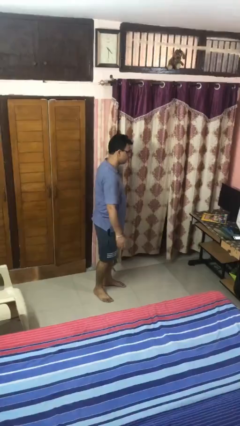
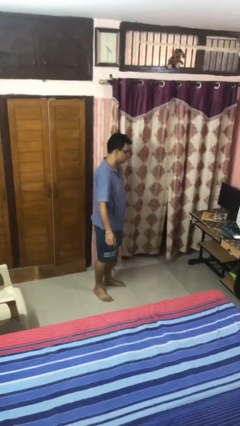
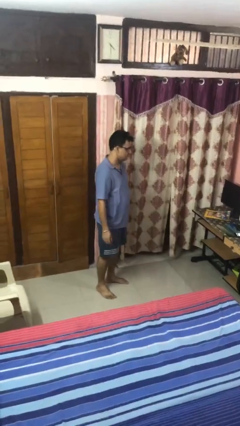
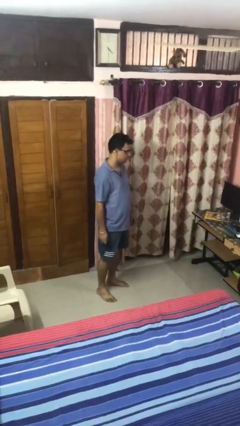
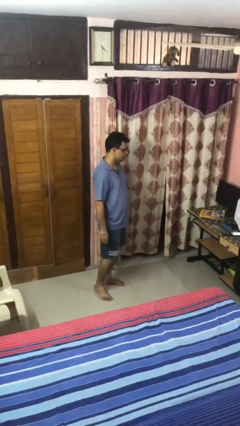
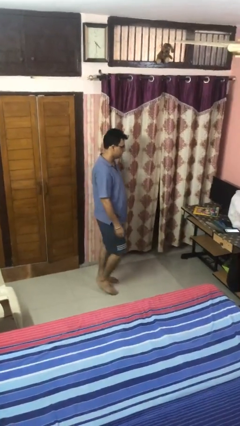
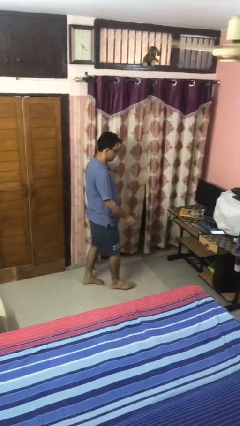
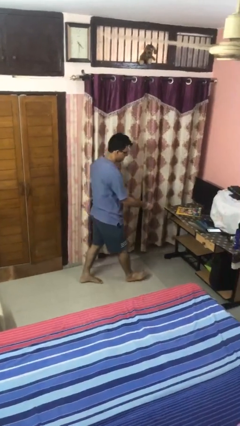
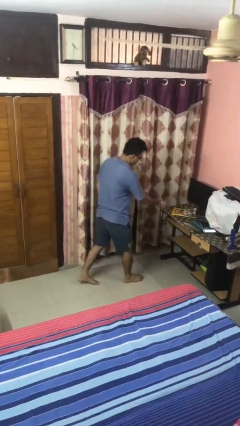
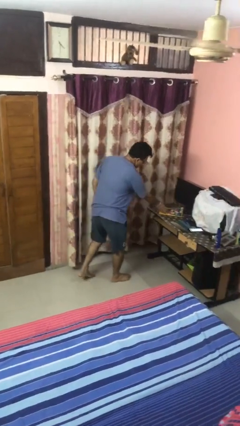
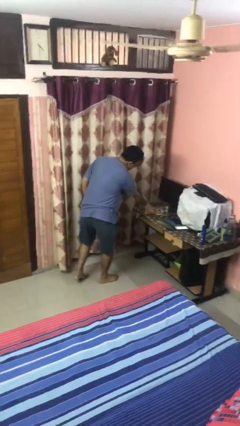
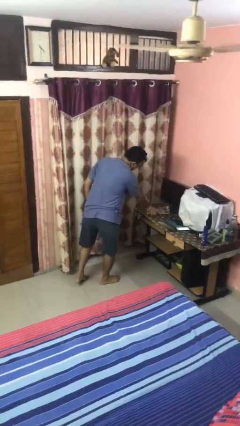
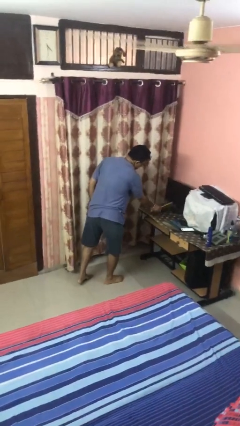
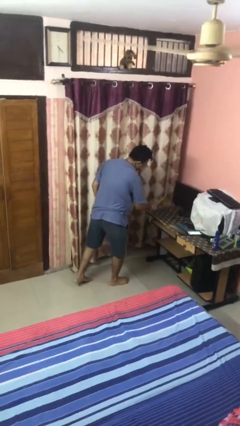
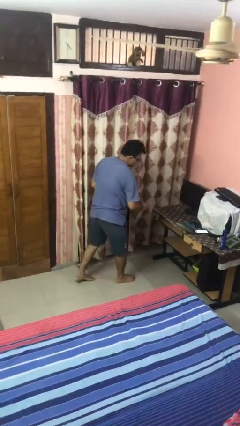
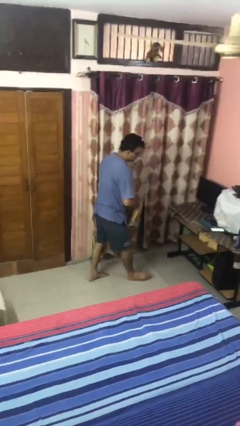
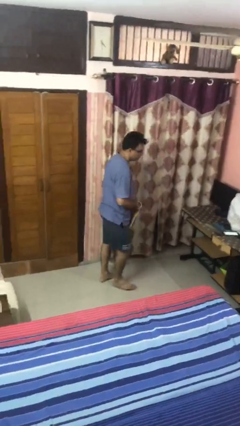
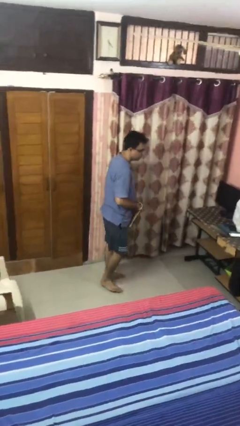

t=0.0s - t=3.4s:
person picks up object from table

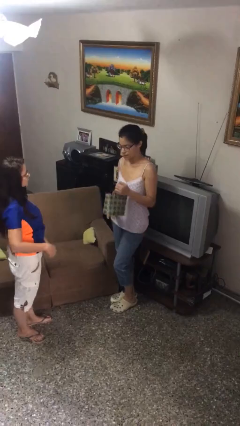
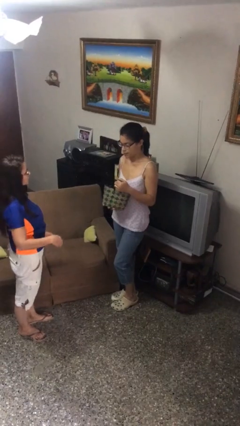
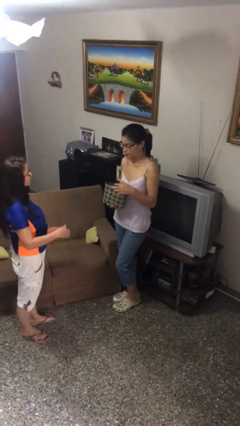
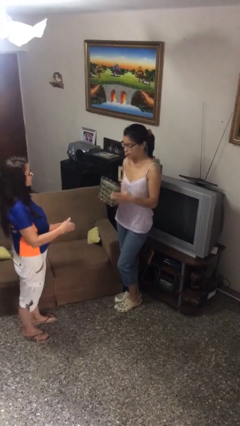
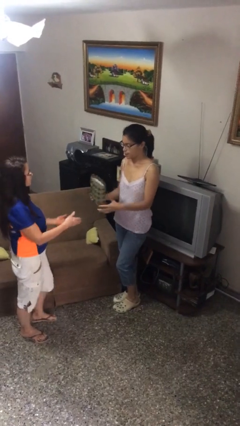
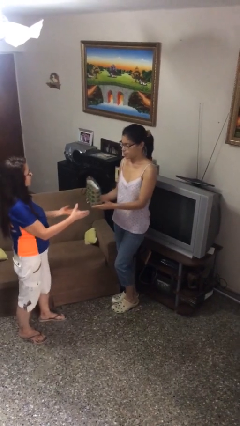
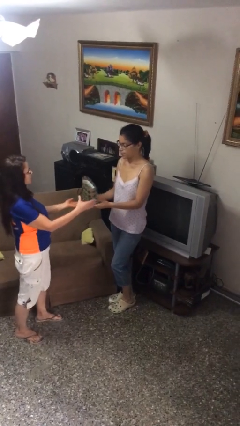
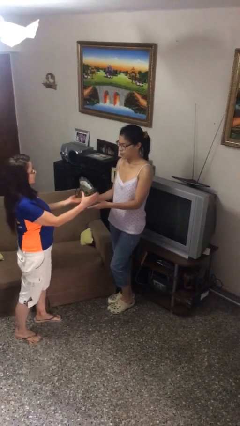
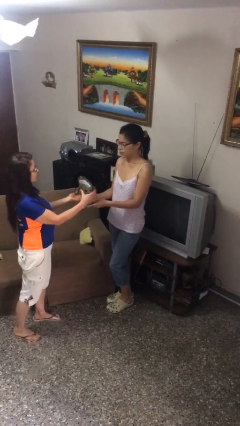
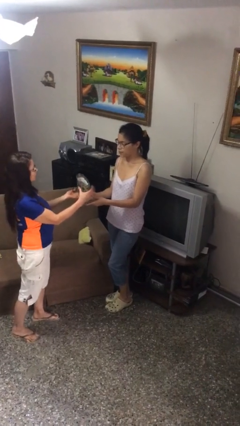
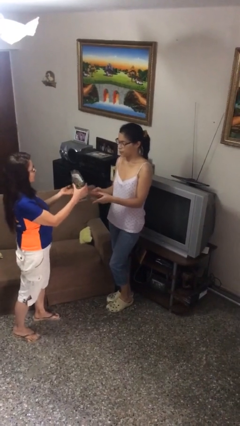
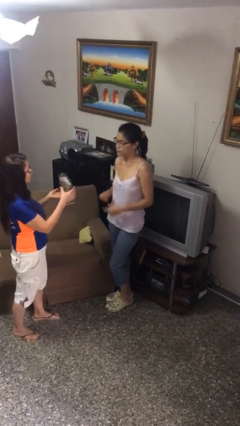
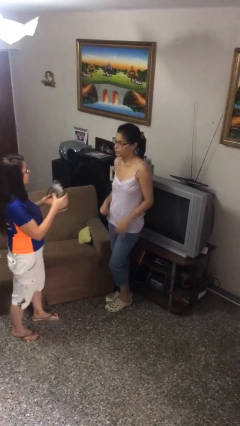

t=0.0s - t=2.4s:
person transfers object to person

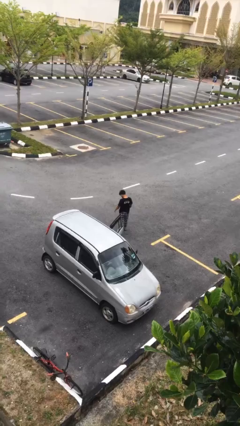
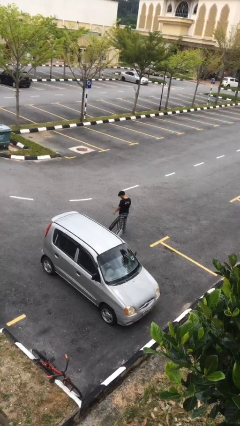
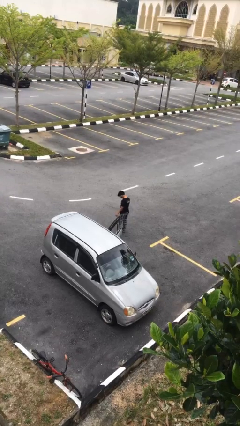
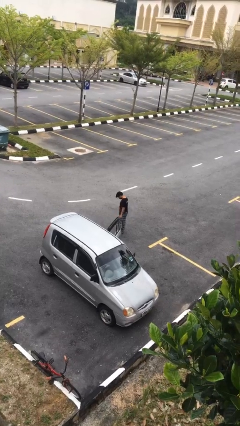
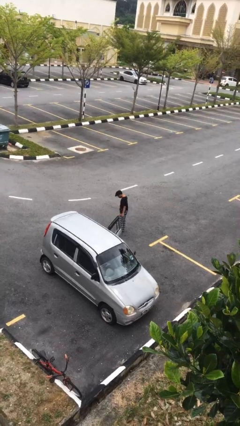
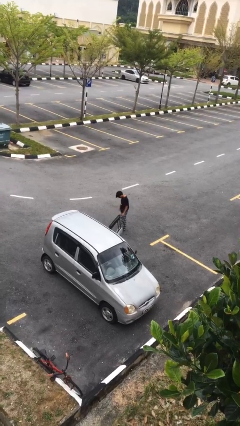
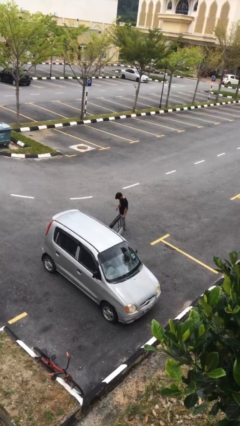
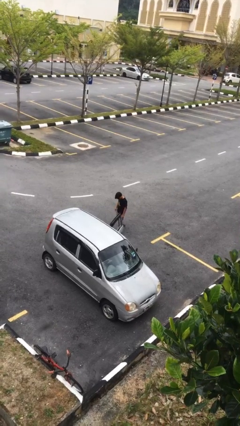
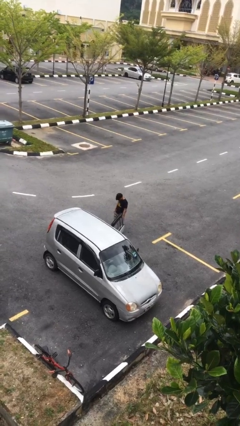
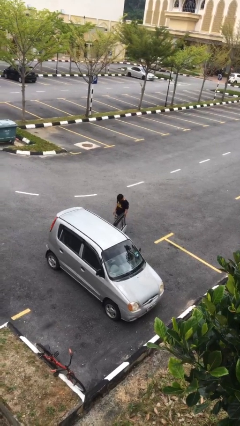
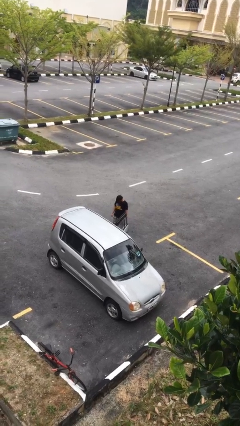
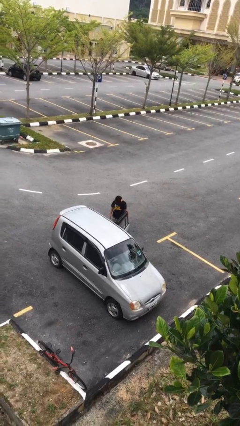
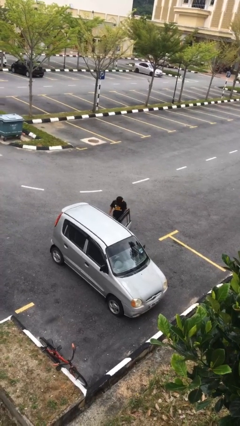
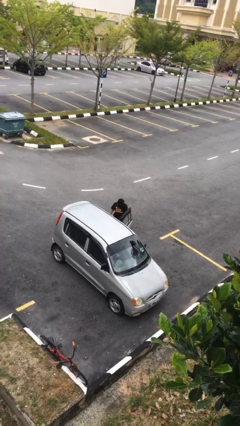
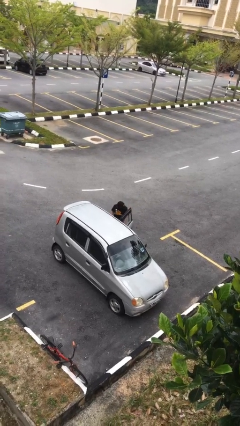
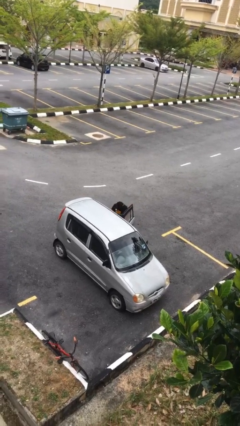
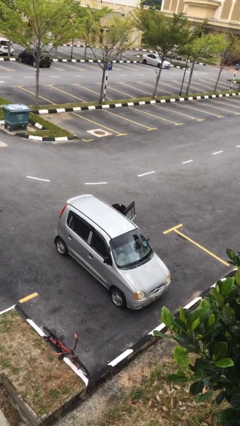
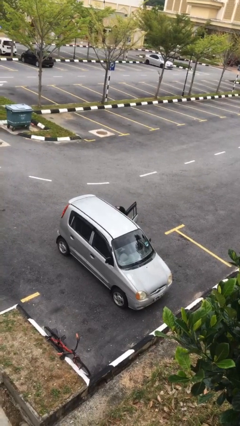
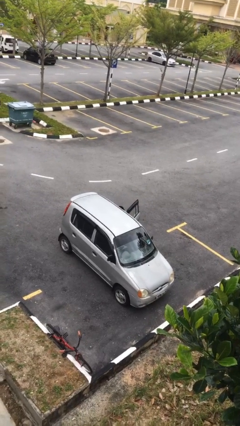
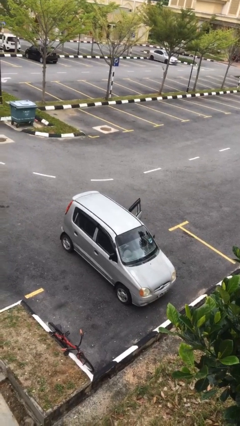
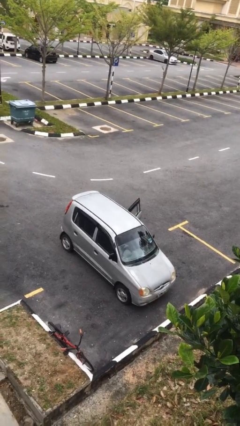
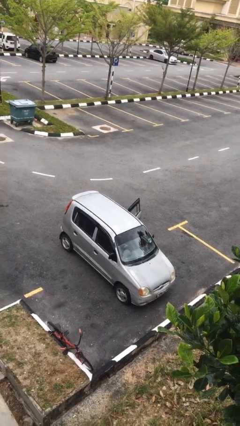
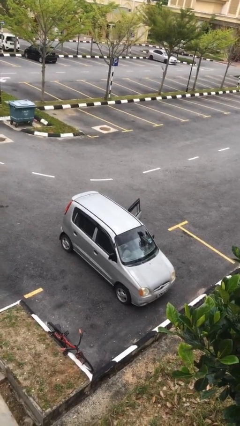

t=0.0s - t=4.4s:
person enters car

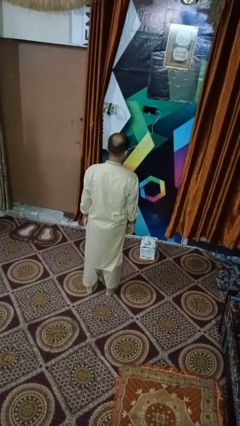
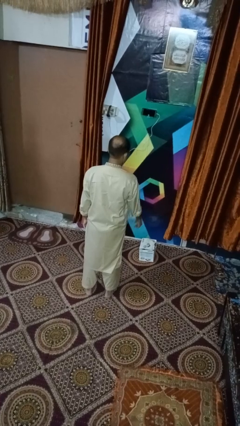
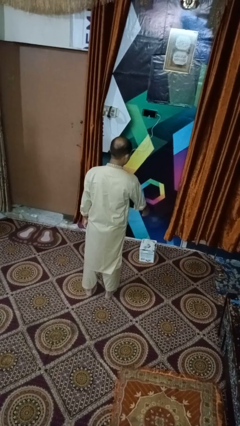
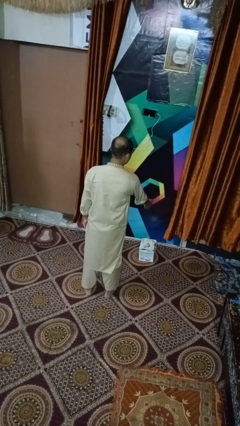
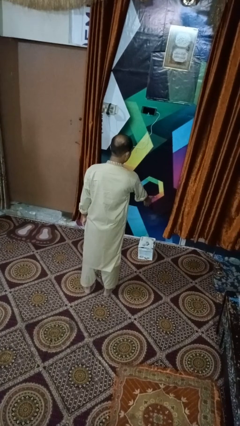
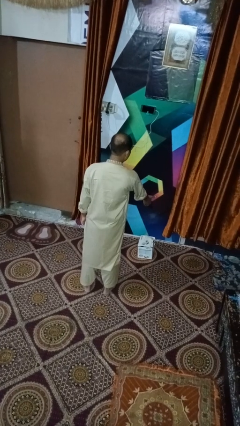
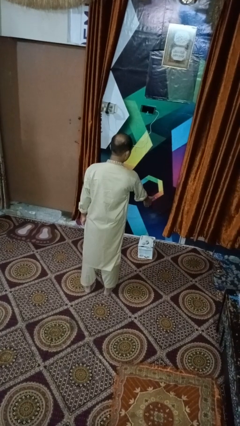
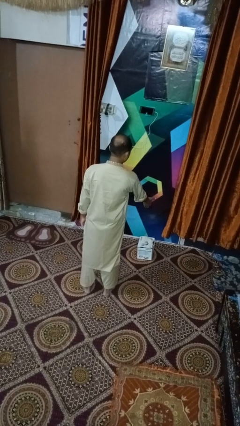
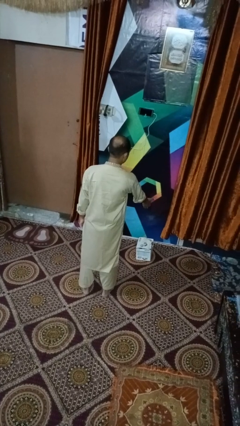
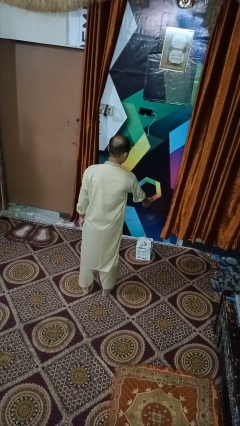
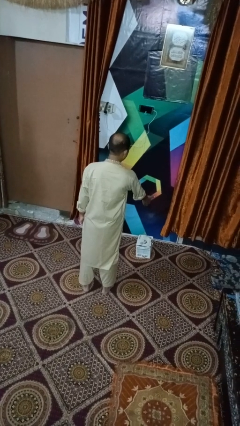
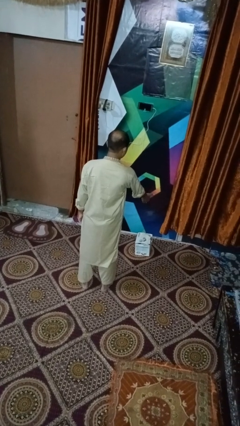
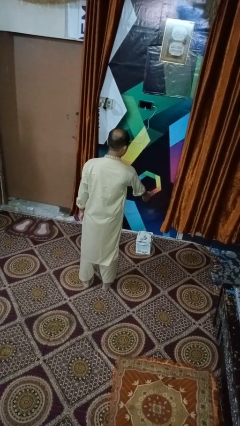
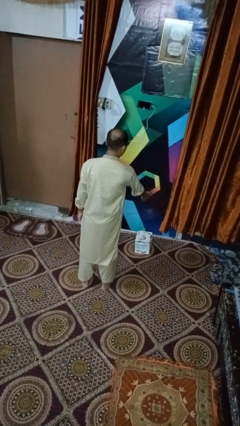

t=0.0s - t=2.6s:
person waves hand over object

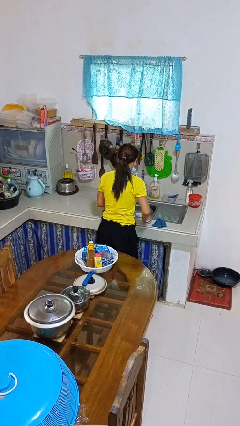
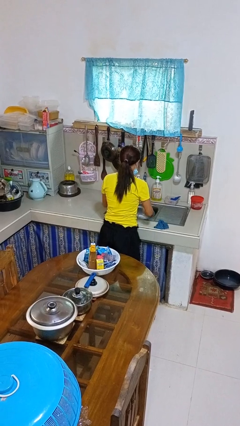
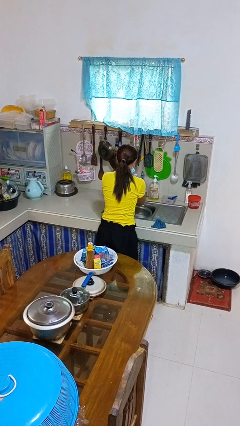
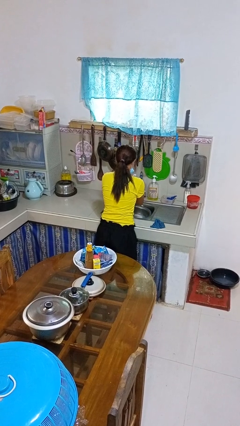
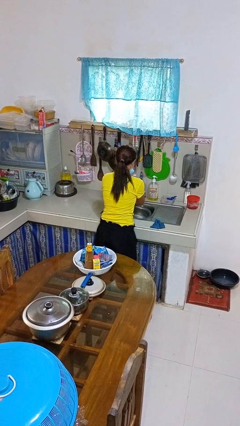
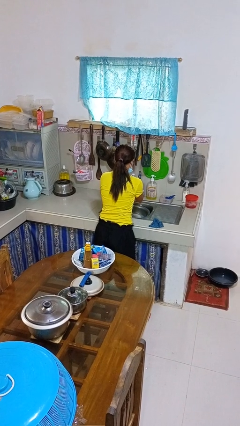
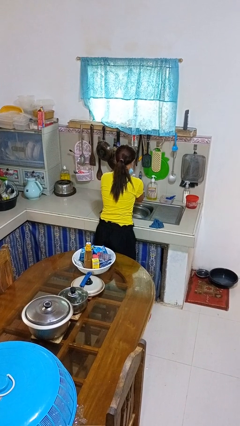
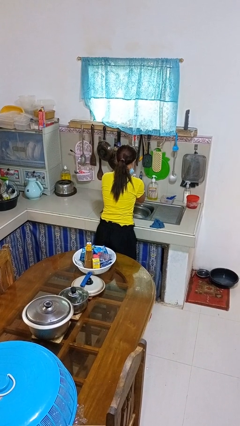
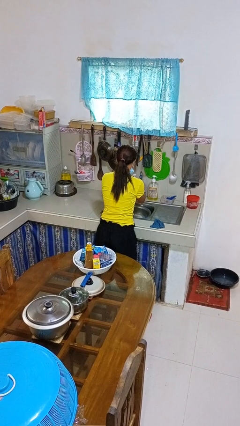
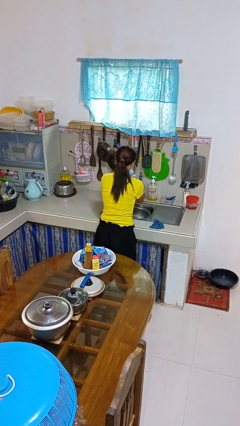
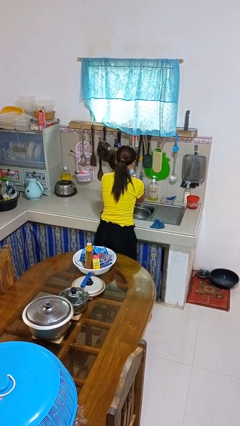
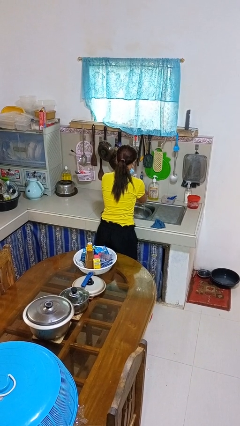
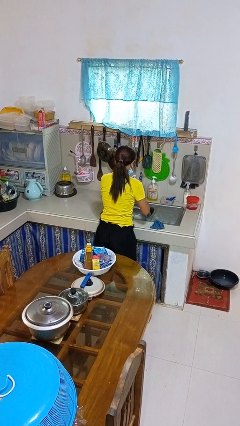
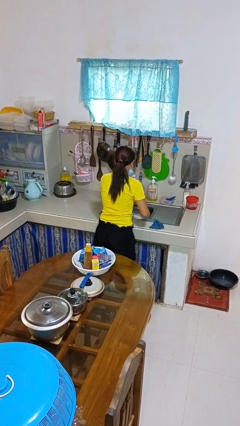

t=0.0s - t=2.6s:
person washes hands

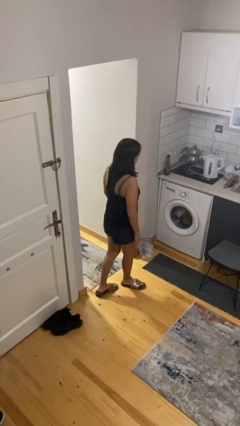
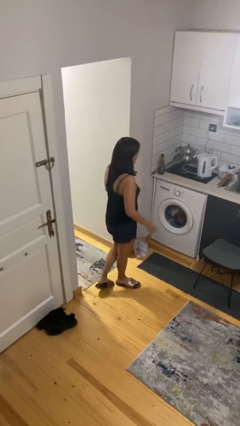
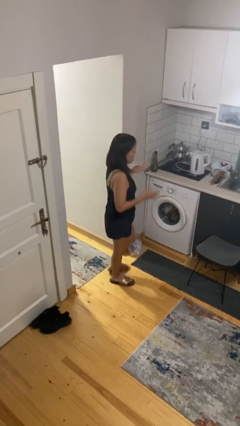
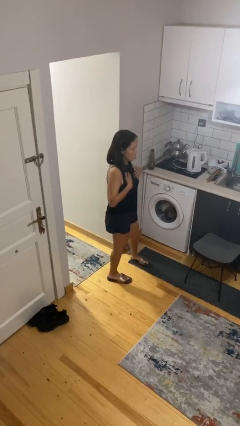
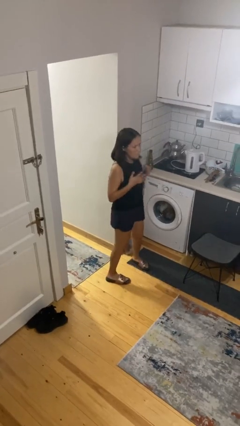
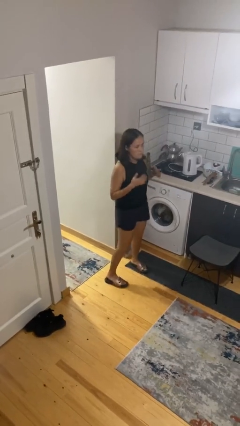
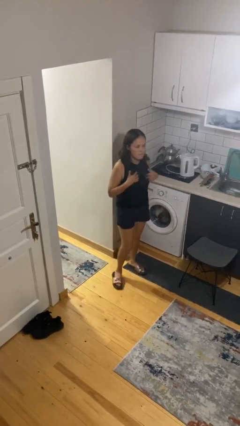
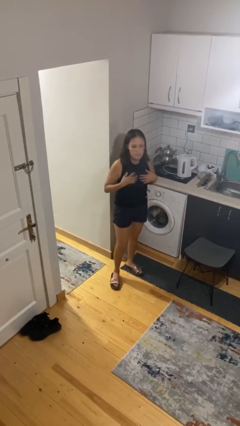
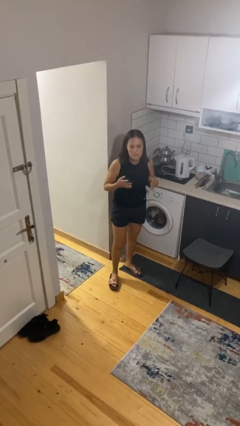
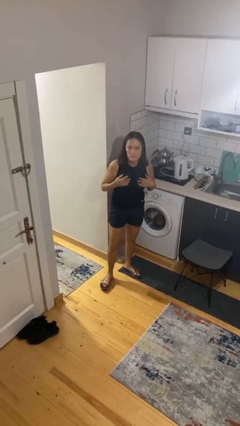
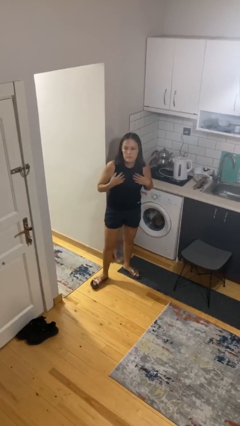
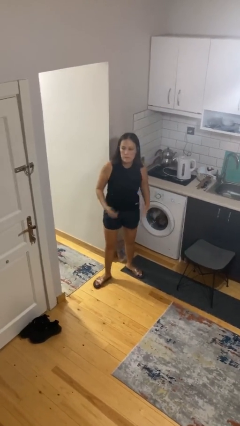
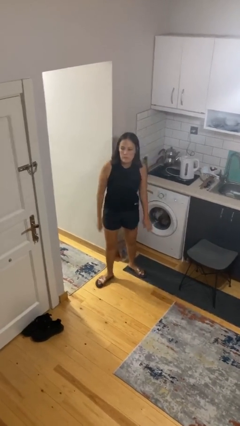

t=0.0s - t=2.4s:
person drums on chest
